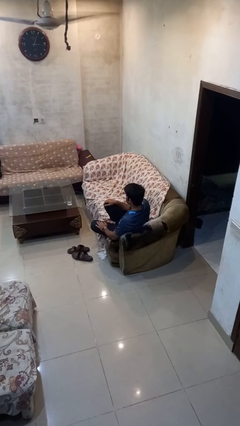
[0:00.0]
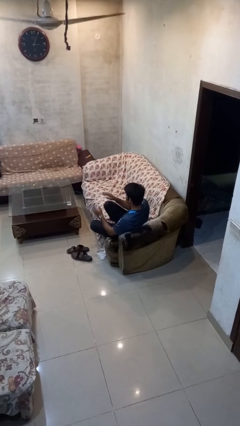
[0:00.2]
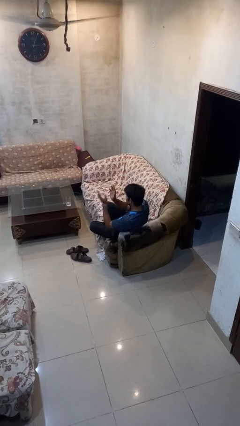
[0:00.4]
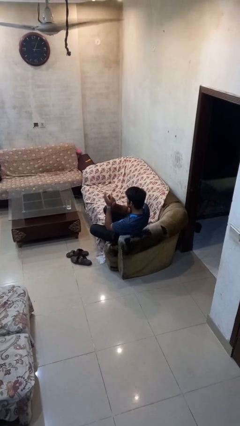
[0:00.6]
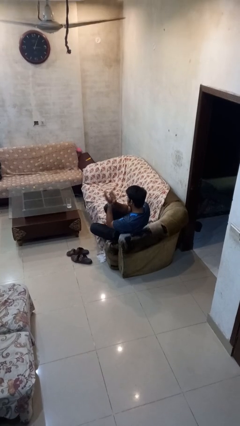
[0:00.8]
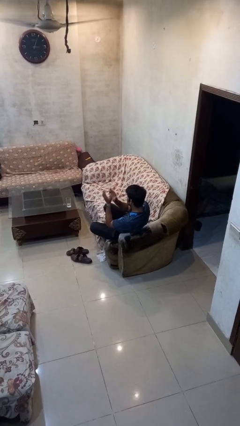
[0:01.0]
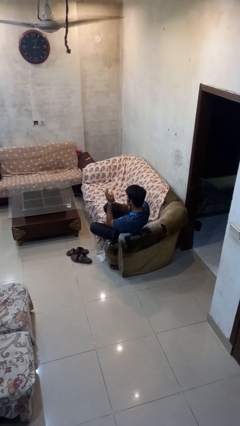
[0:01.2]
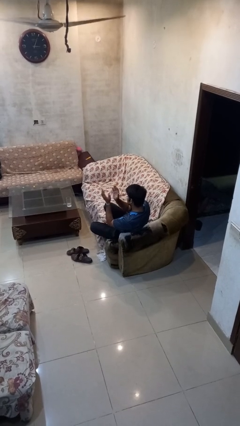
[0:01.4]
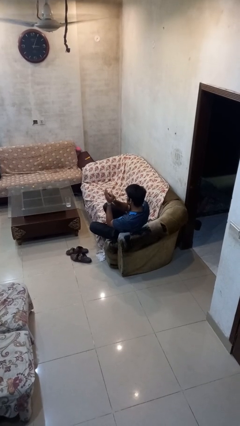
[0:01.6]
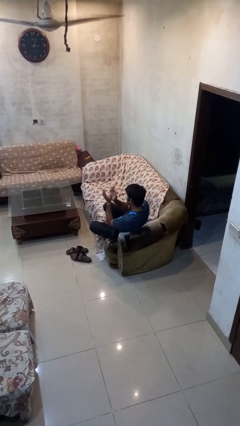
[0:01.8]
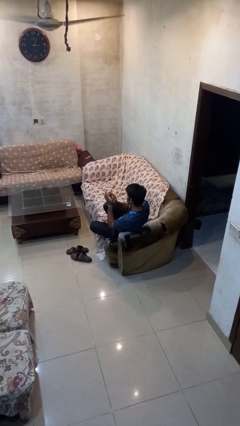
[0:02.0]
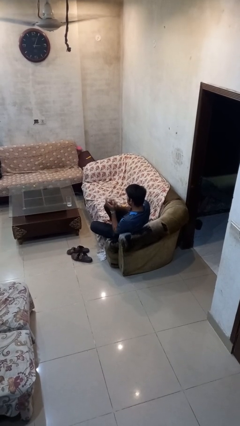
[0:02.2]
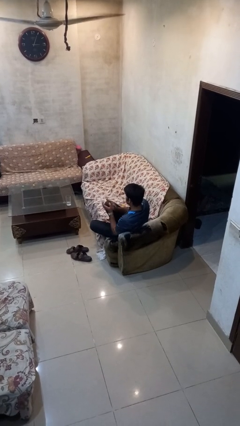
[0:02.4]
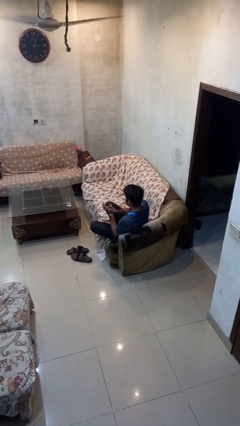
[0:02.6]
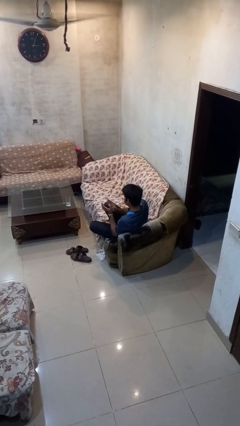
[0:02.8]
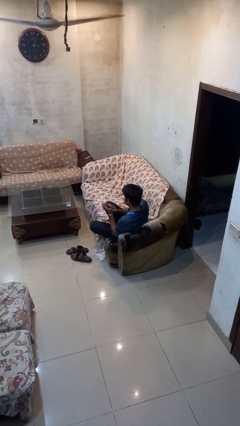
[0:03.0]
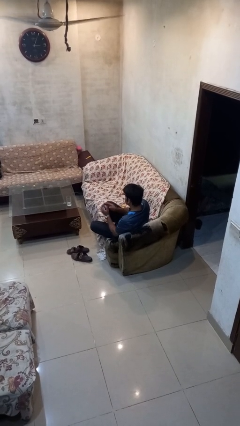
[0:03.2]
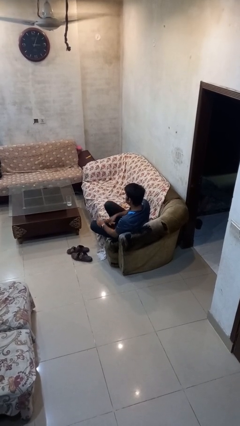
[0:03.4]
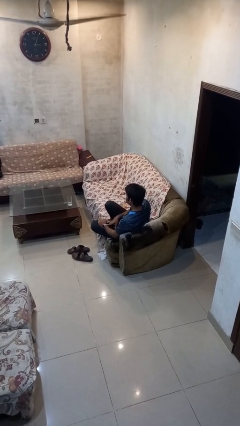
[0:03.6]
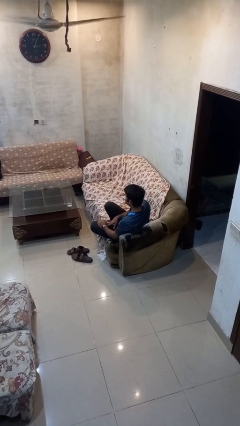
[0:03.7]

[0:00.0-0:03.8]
person claps hands

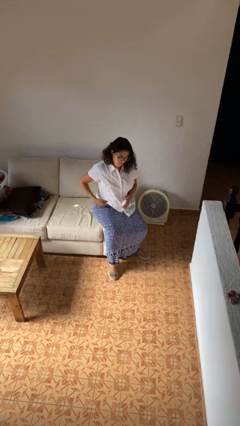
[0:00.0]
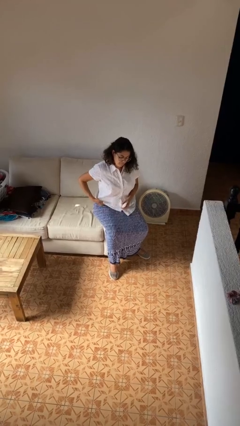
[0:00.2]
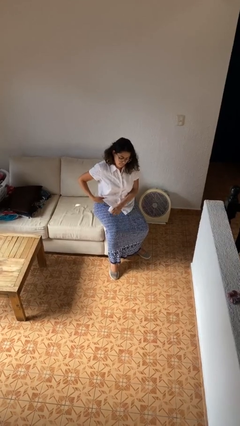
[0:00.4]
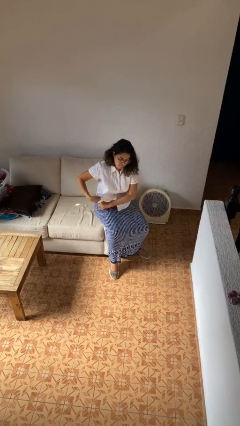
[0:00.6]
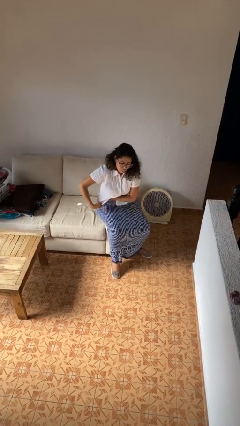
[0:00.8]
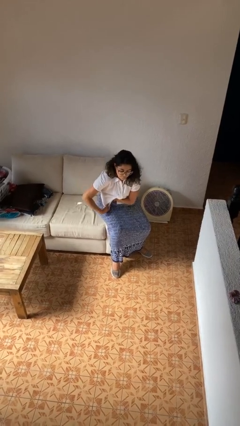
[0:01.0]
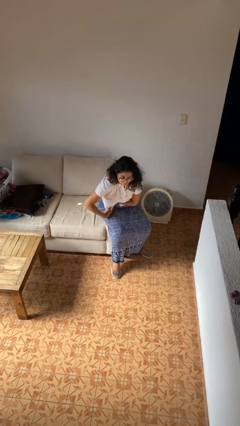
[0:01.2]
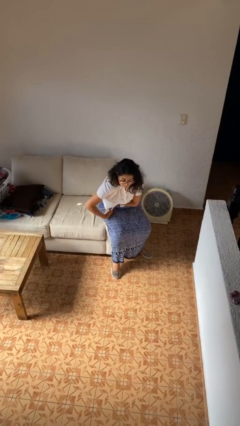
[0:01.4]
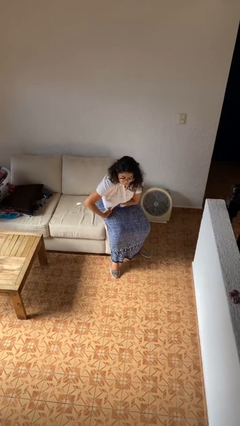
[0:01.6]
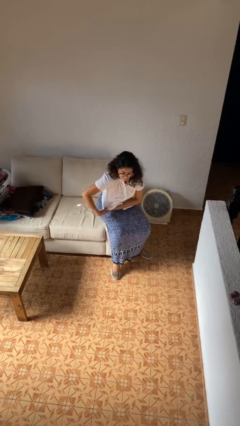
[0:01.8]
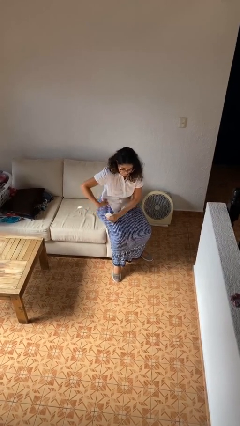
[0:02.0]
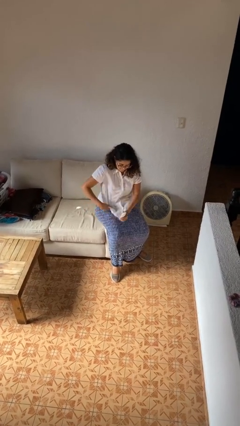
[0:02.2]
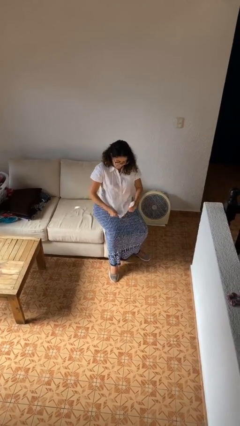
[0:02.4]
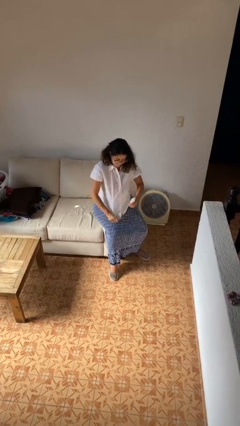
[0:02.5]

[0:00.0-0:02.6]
person applies deodorant

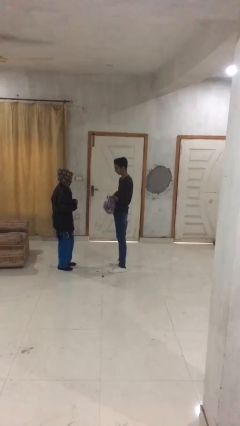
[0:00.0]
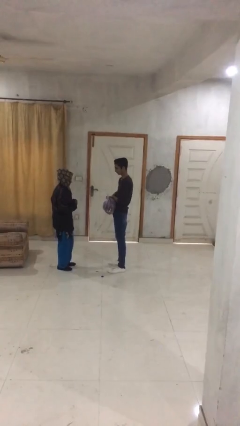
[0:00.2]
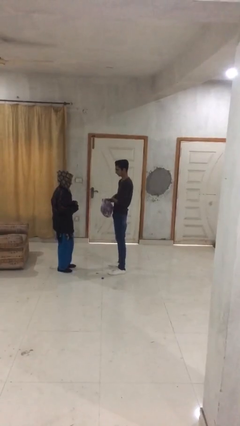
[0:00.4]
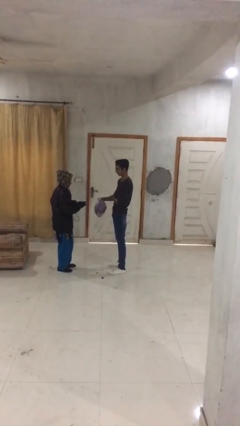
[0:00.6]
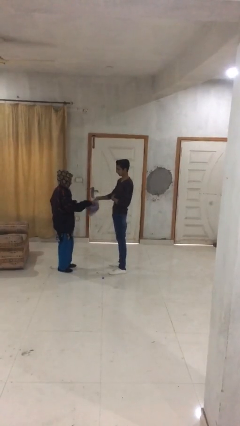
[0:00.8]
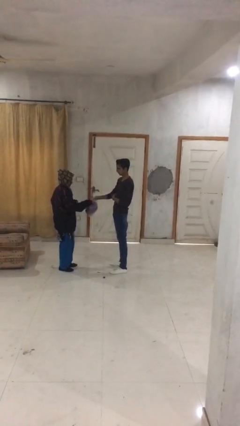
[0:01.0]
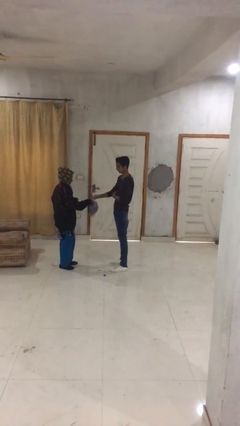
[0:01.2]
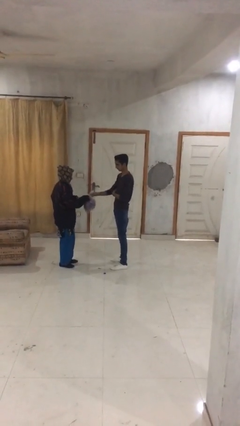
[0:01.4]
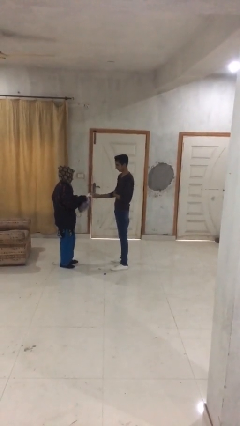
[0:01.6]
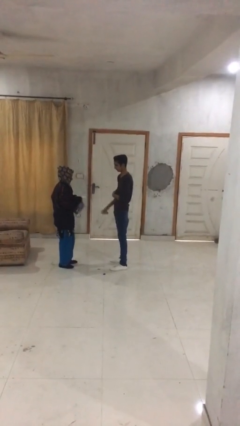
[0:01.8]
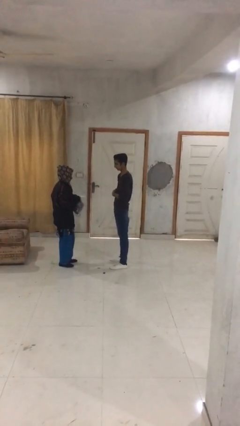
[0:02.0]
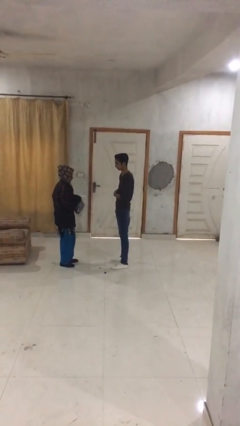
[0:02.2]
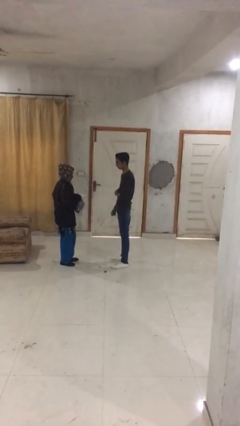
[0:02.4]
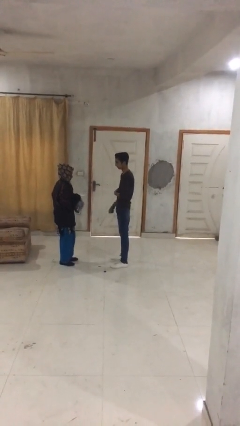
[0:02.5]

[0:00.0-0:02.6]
person transfers object to person

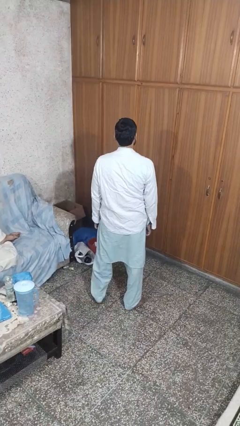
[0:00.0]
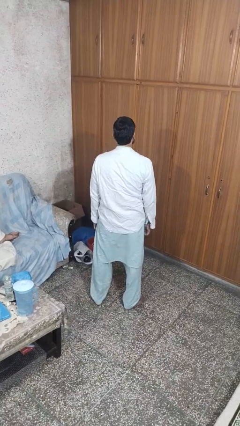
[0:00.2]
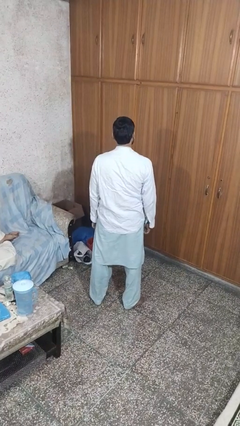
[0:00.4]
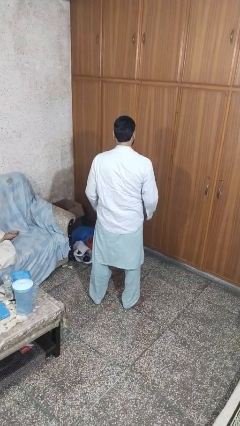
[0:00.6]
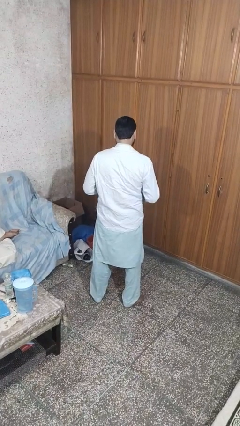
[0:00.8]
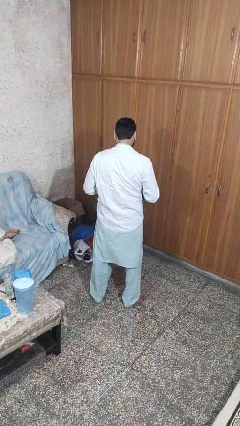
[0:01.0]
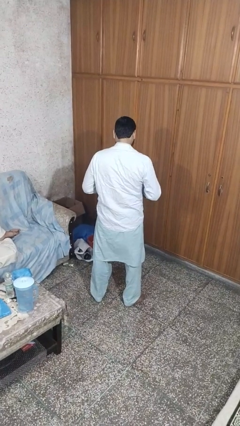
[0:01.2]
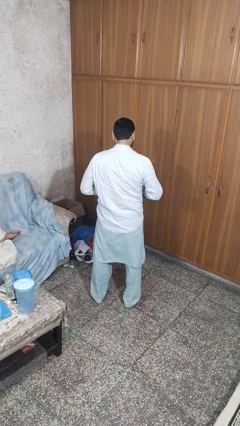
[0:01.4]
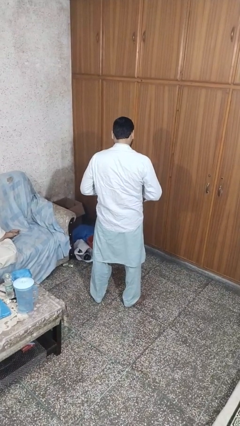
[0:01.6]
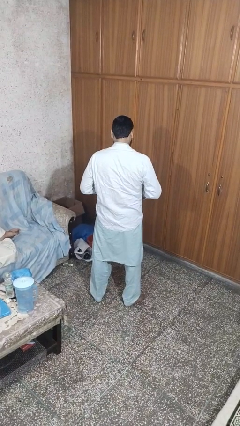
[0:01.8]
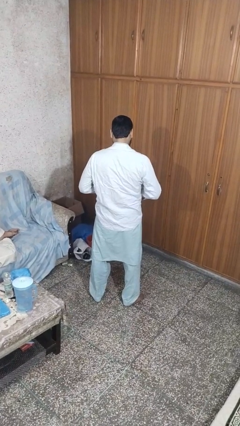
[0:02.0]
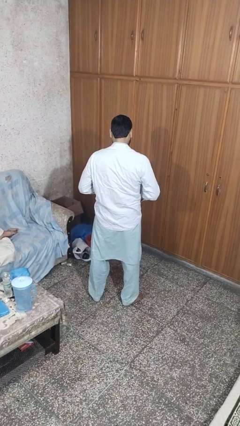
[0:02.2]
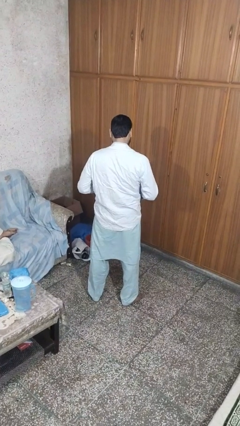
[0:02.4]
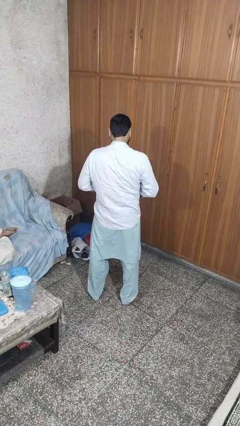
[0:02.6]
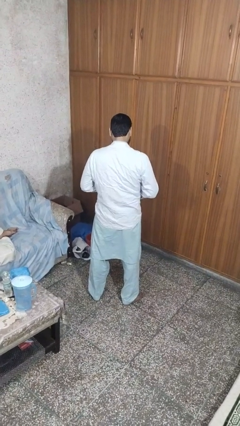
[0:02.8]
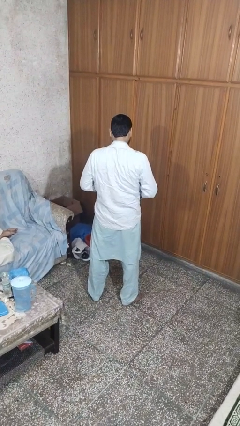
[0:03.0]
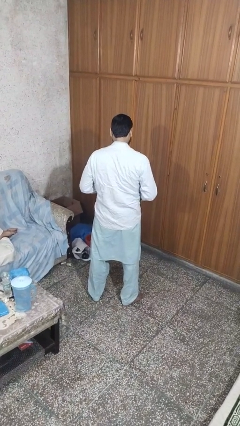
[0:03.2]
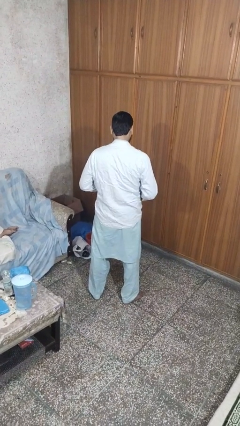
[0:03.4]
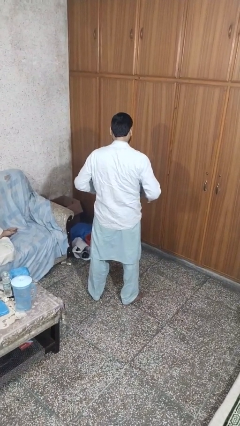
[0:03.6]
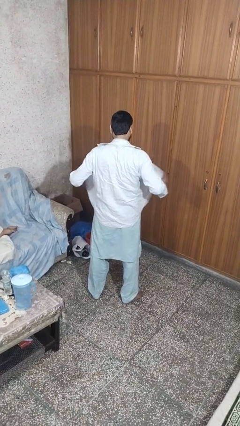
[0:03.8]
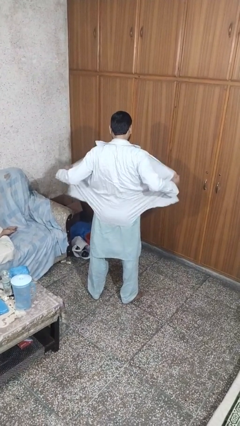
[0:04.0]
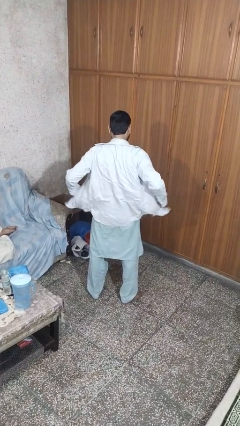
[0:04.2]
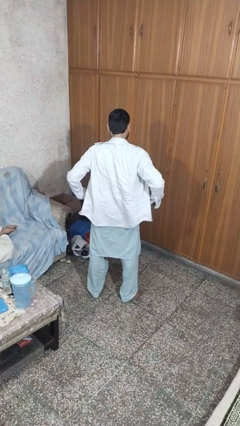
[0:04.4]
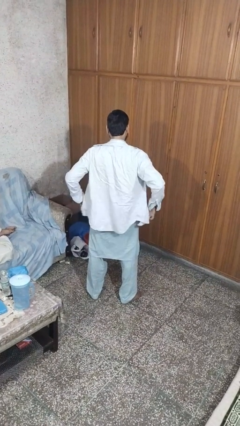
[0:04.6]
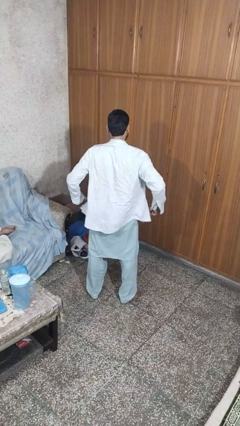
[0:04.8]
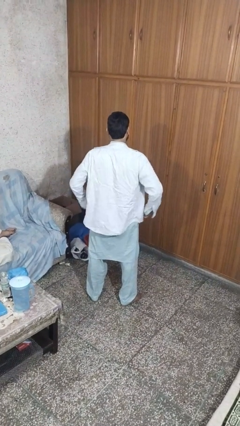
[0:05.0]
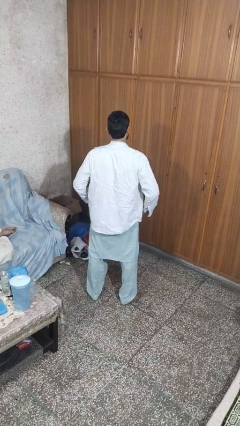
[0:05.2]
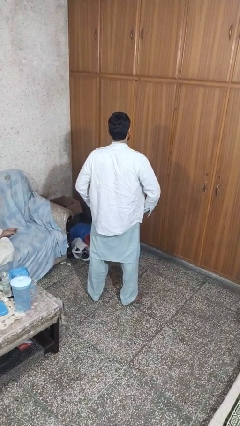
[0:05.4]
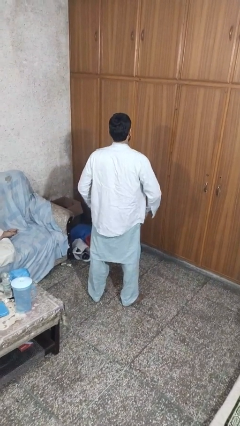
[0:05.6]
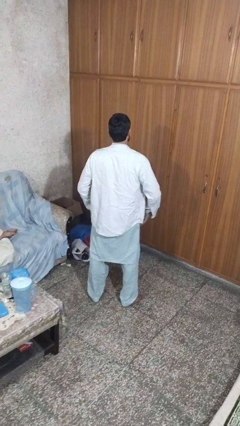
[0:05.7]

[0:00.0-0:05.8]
person unbuttons shirt

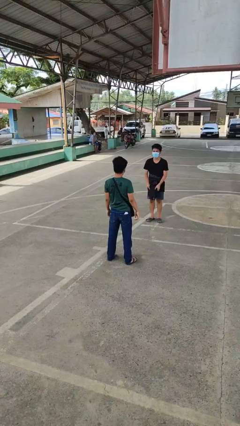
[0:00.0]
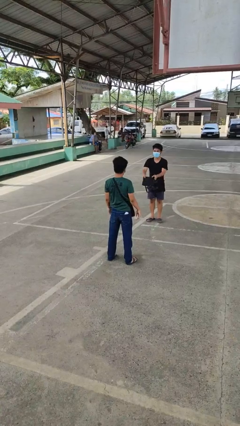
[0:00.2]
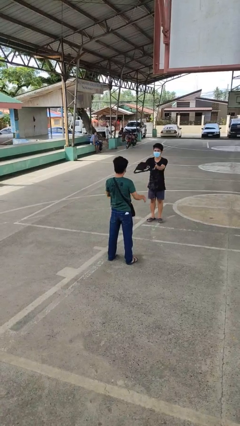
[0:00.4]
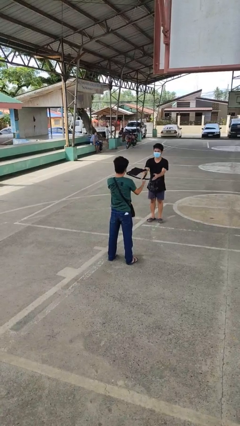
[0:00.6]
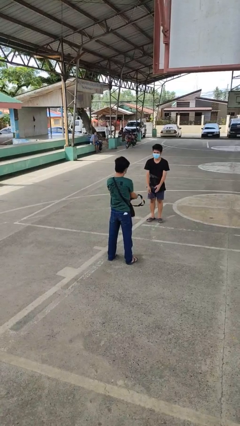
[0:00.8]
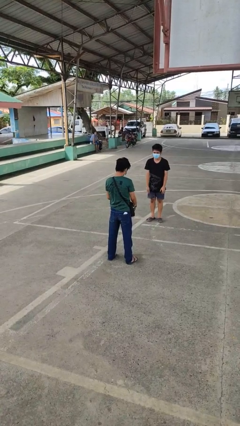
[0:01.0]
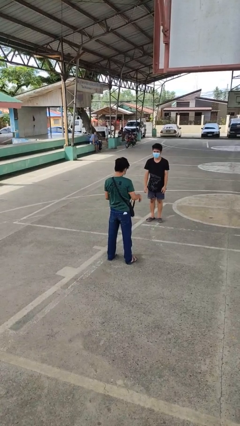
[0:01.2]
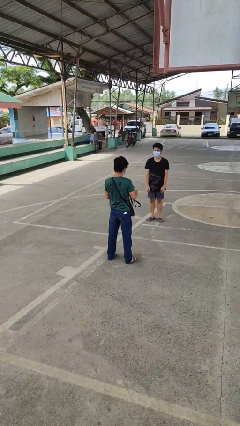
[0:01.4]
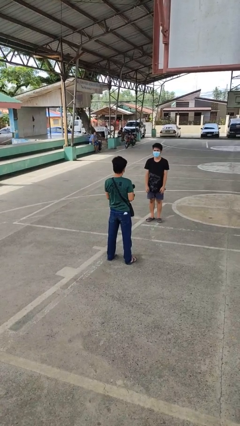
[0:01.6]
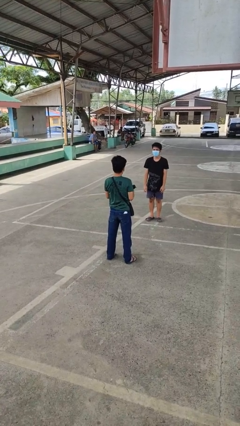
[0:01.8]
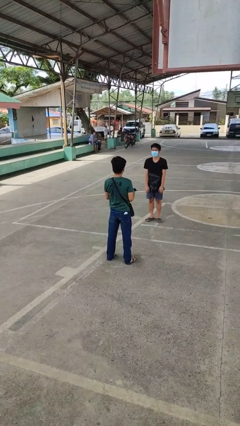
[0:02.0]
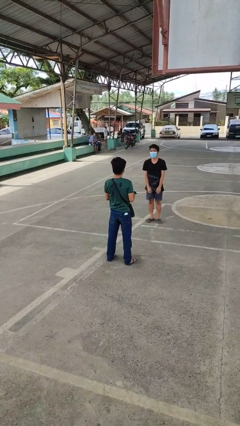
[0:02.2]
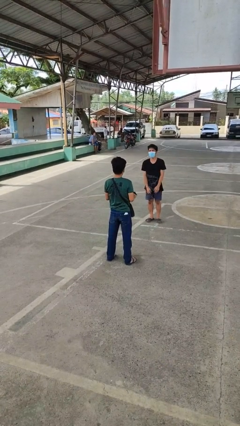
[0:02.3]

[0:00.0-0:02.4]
person catches object from person
